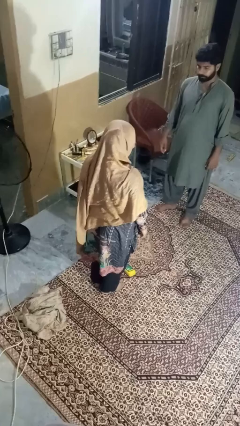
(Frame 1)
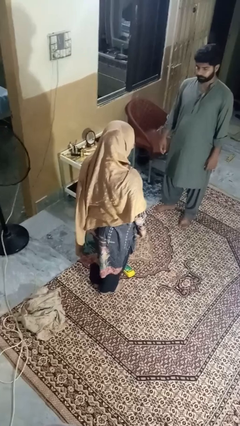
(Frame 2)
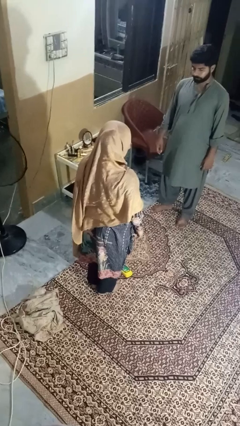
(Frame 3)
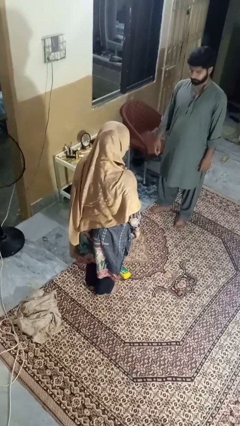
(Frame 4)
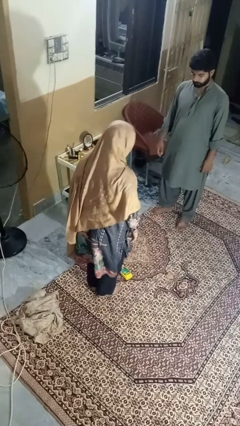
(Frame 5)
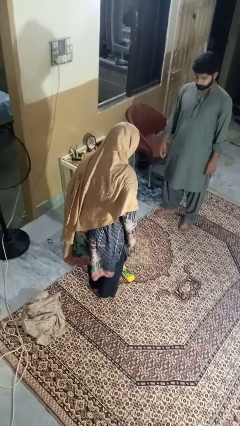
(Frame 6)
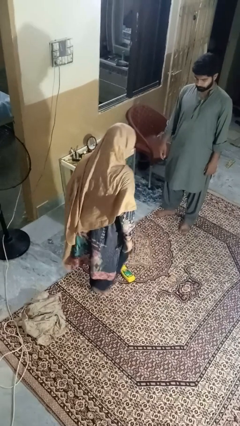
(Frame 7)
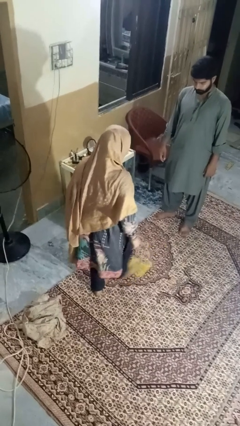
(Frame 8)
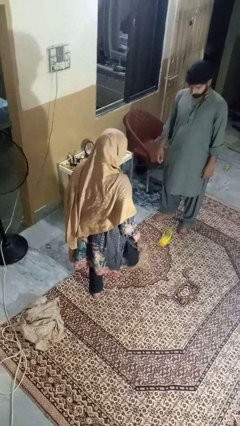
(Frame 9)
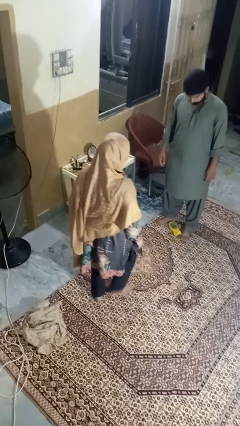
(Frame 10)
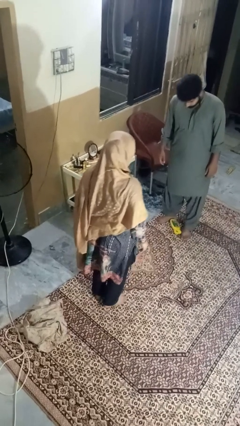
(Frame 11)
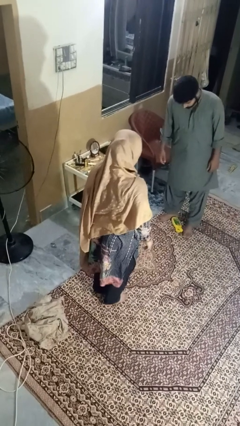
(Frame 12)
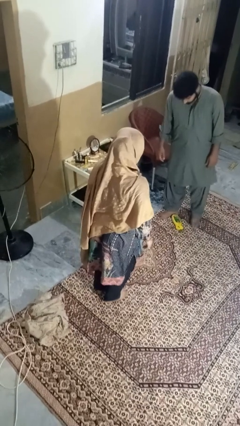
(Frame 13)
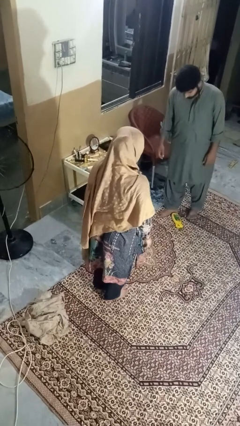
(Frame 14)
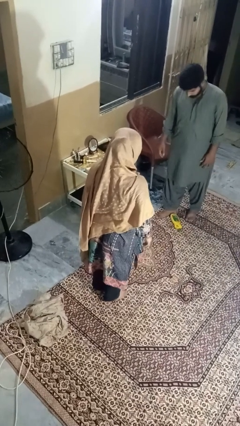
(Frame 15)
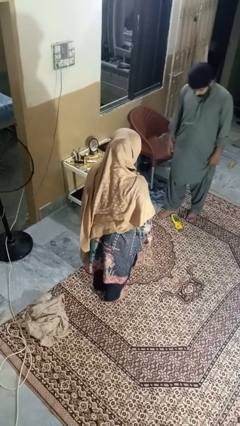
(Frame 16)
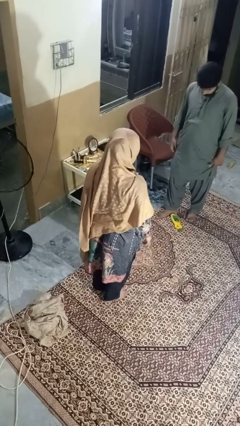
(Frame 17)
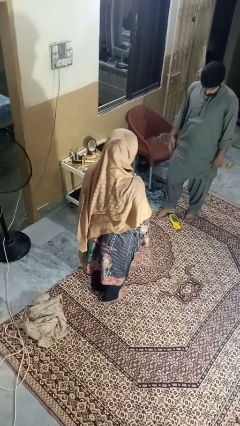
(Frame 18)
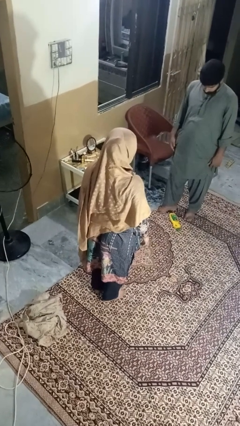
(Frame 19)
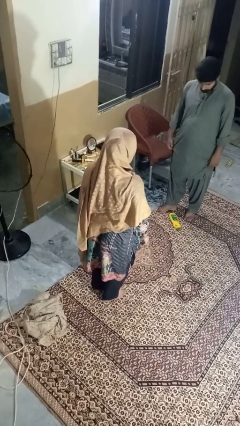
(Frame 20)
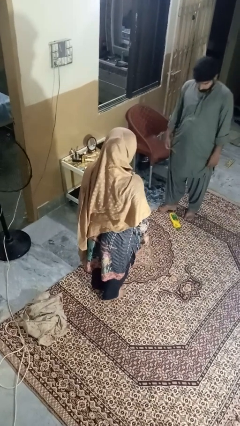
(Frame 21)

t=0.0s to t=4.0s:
person kicks object to person

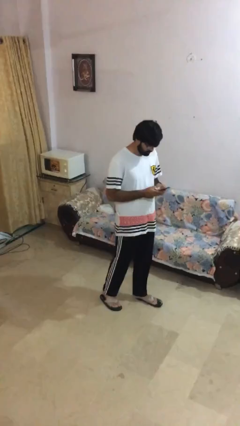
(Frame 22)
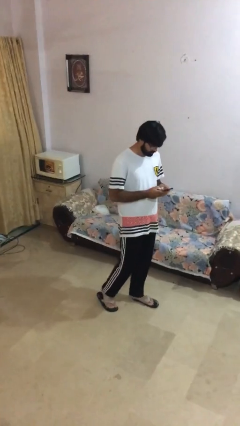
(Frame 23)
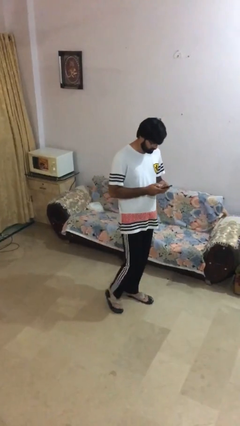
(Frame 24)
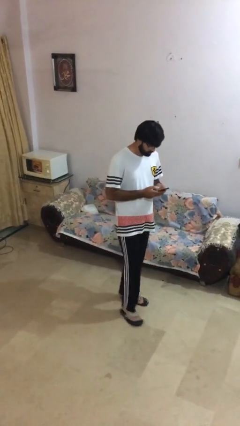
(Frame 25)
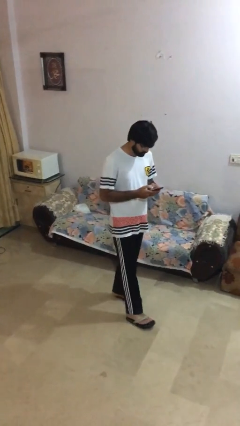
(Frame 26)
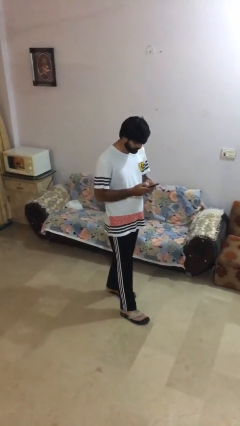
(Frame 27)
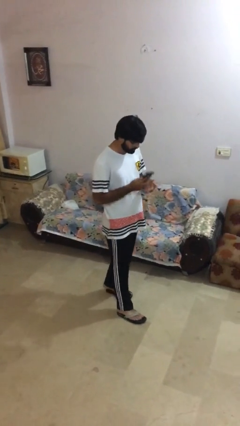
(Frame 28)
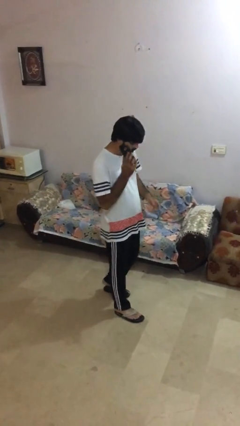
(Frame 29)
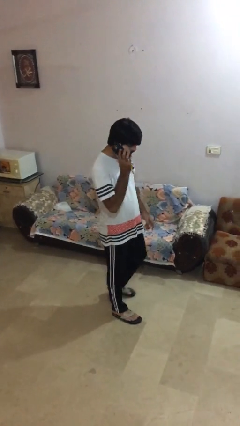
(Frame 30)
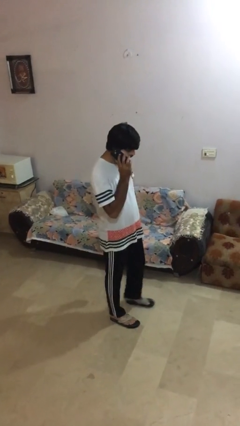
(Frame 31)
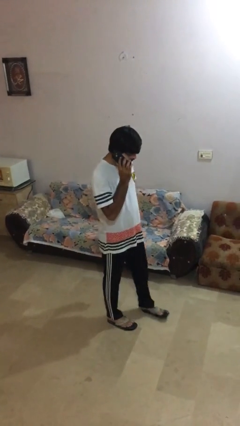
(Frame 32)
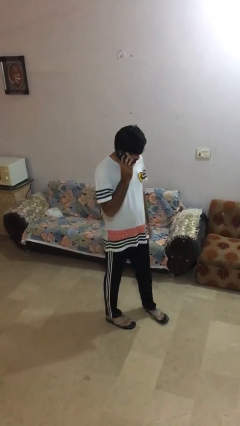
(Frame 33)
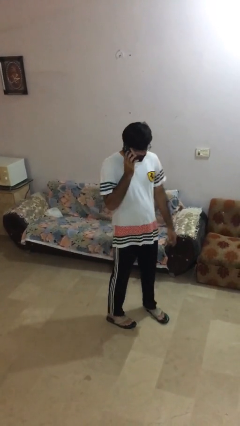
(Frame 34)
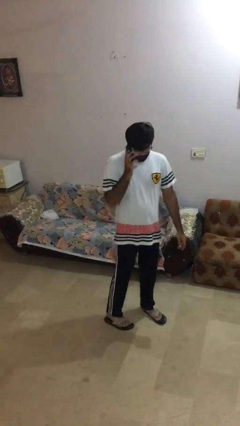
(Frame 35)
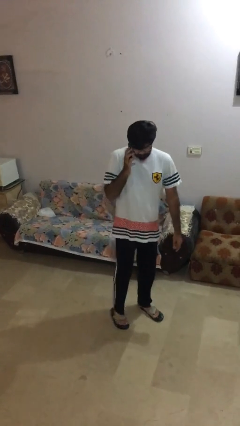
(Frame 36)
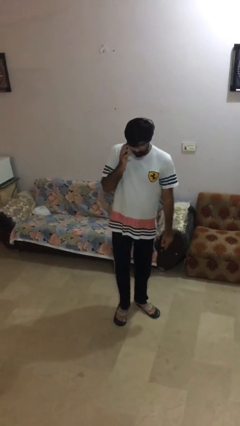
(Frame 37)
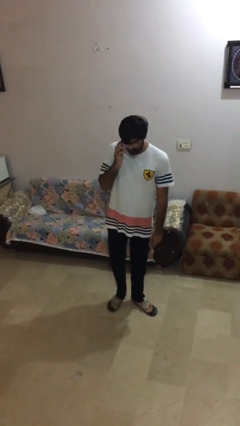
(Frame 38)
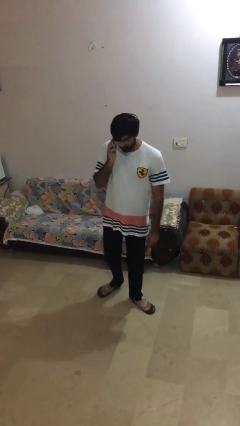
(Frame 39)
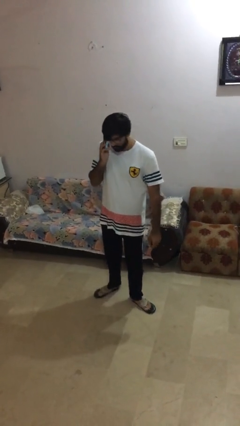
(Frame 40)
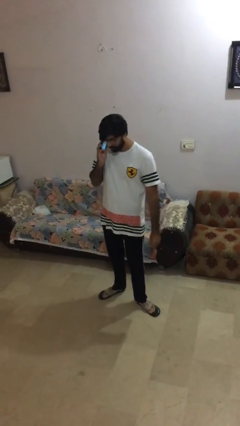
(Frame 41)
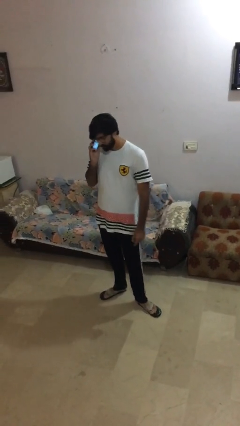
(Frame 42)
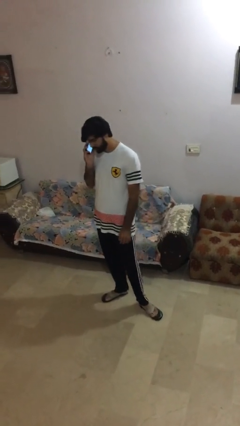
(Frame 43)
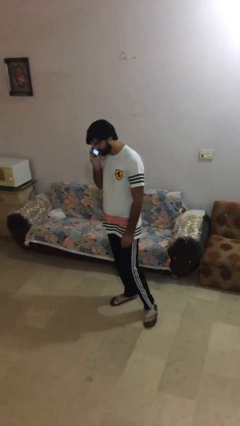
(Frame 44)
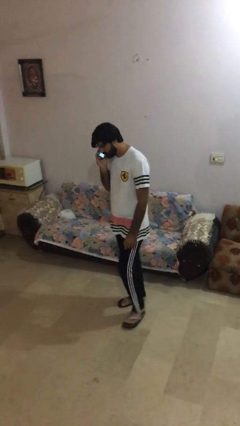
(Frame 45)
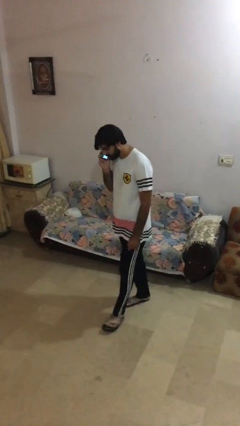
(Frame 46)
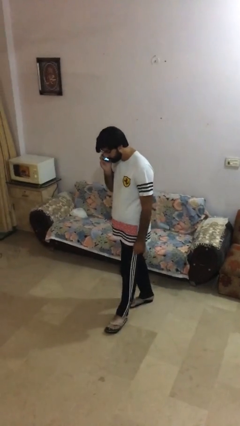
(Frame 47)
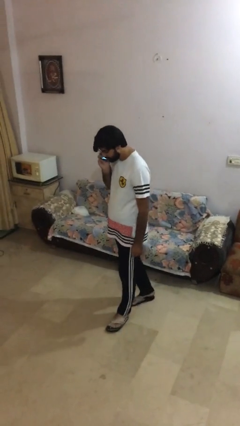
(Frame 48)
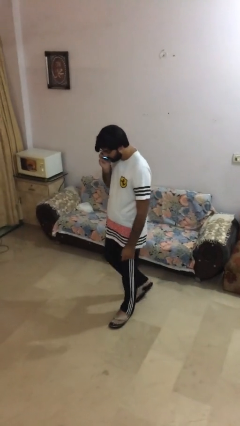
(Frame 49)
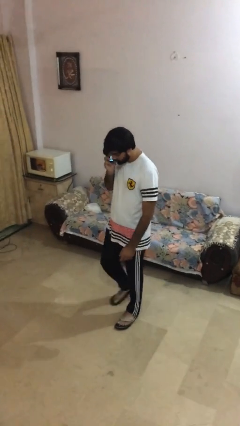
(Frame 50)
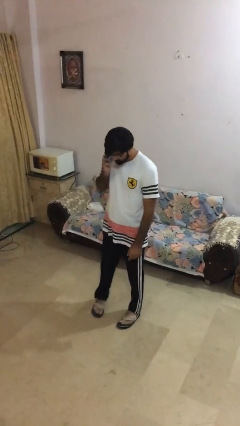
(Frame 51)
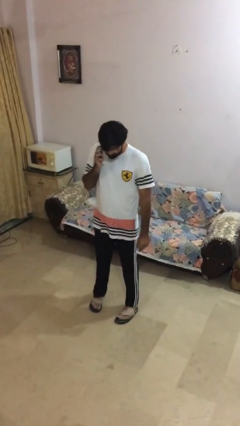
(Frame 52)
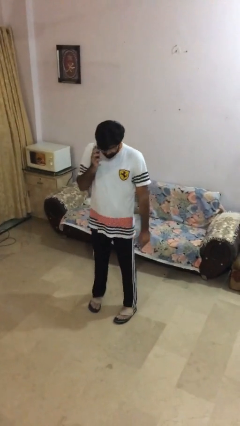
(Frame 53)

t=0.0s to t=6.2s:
person talks on phone

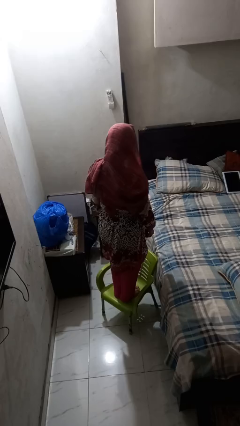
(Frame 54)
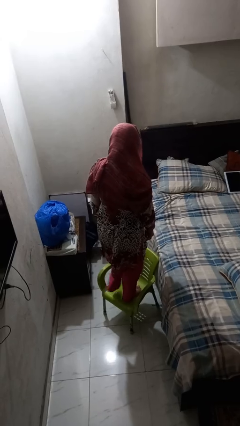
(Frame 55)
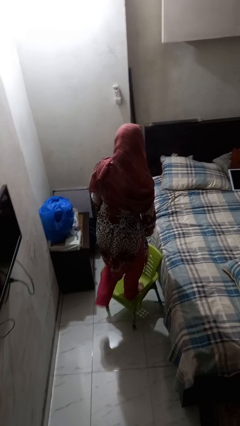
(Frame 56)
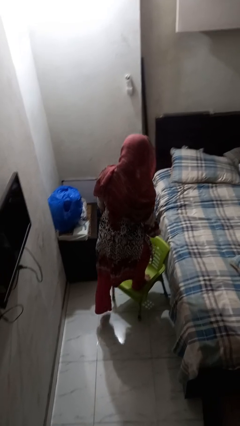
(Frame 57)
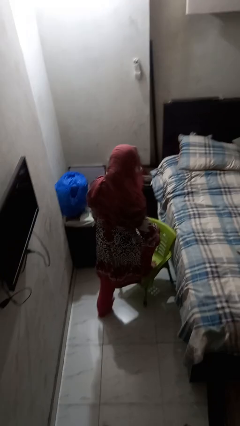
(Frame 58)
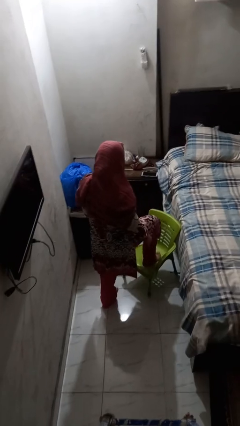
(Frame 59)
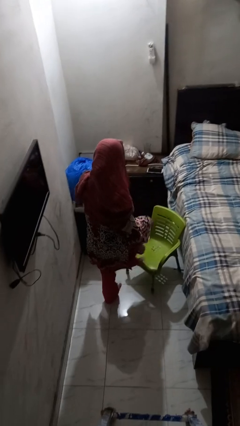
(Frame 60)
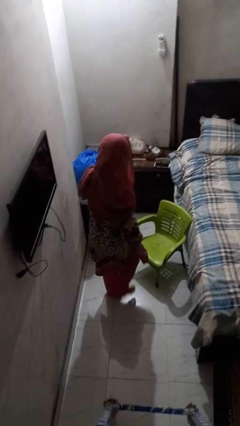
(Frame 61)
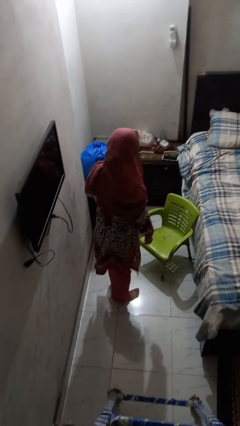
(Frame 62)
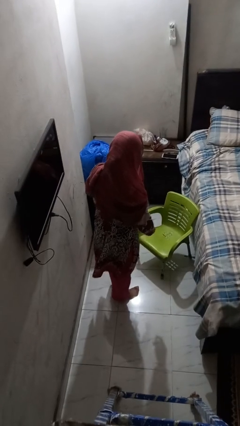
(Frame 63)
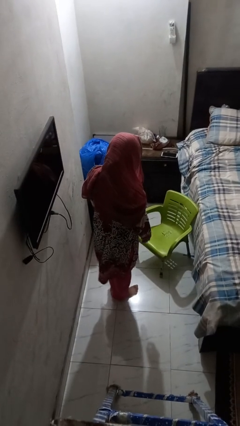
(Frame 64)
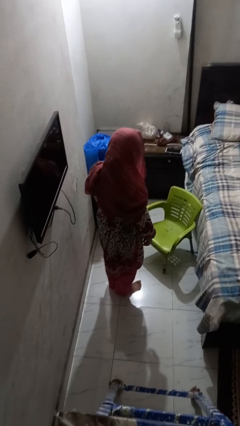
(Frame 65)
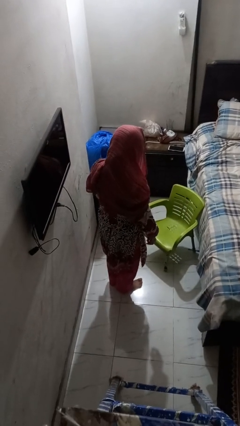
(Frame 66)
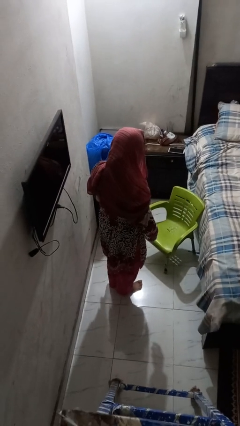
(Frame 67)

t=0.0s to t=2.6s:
person climbs off chair

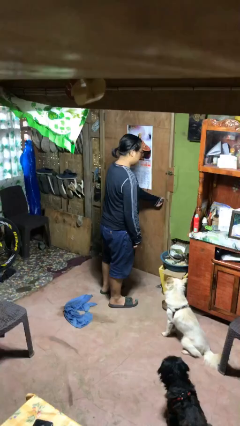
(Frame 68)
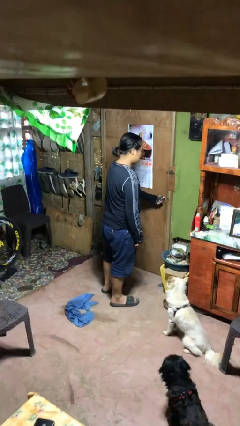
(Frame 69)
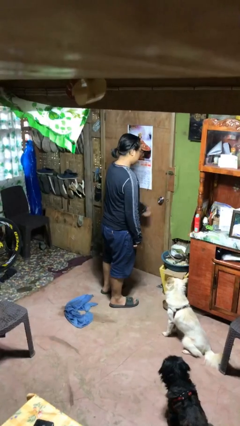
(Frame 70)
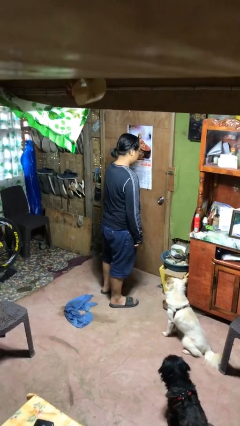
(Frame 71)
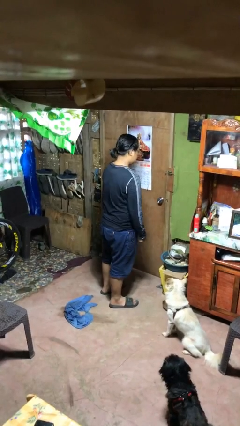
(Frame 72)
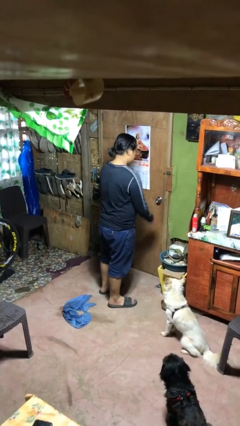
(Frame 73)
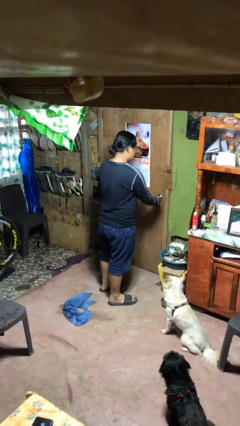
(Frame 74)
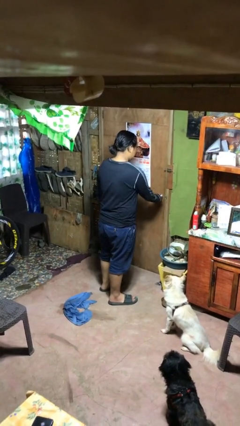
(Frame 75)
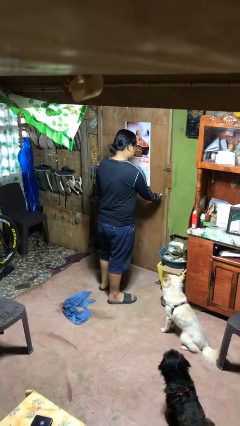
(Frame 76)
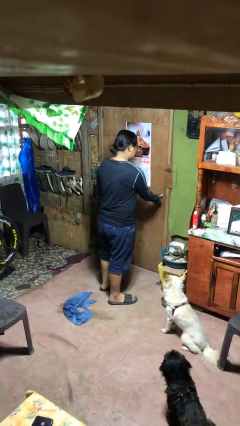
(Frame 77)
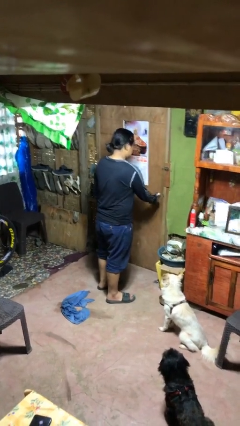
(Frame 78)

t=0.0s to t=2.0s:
person locks door with keys

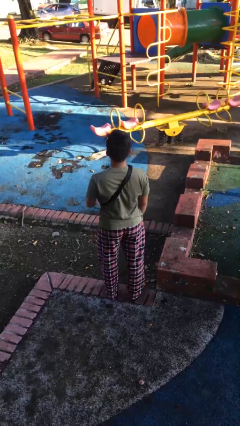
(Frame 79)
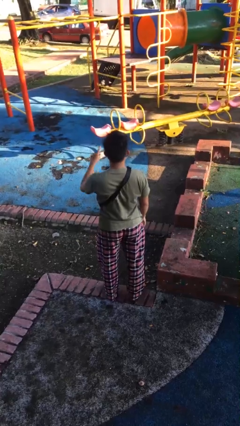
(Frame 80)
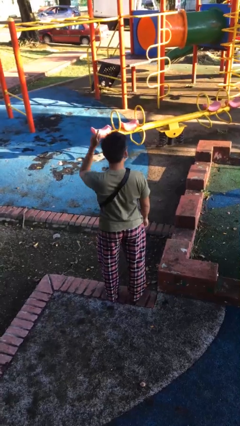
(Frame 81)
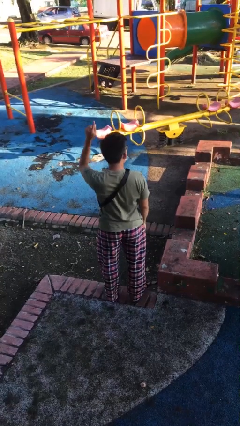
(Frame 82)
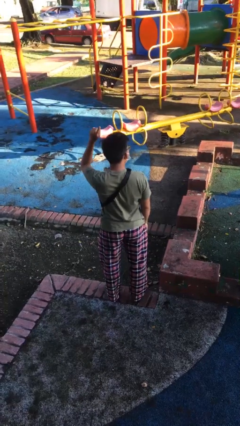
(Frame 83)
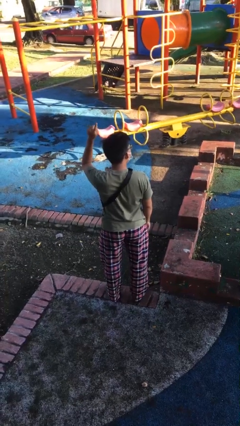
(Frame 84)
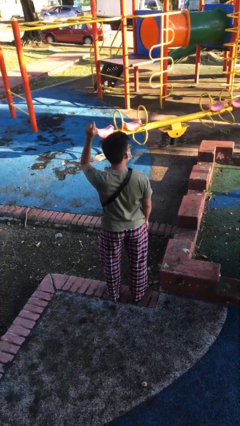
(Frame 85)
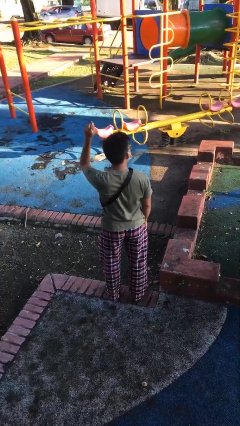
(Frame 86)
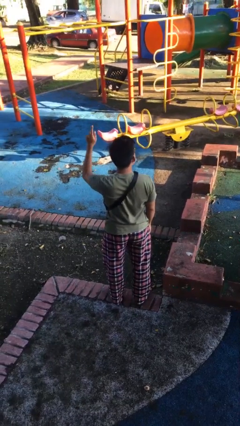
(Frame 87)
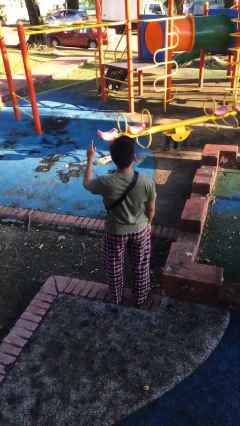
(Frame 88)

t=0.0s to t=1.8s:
person gestures number one

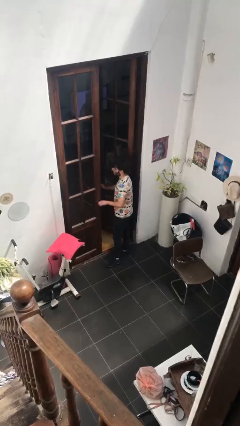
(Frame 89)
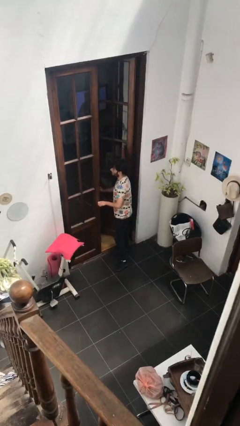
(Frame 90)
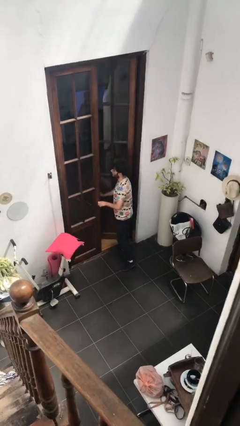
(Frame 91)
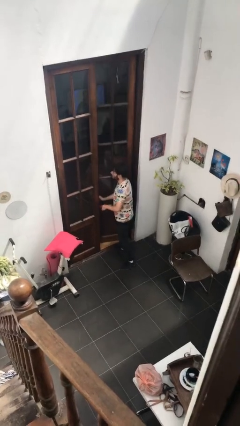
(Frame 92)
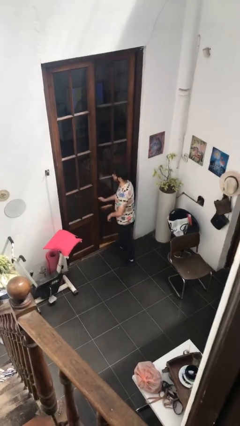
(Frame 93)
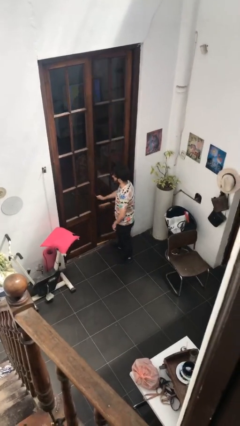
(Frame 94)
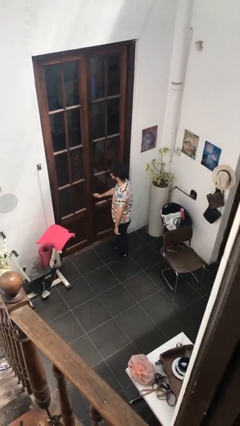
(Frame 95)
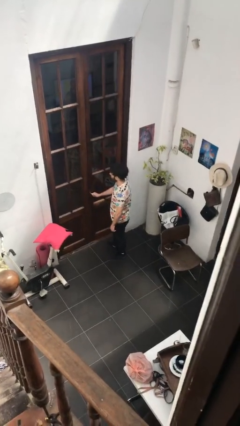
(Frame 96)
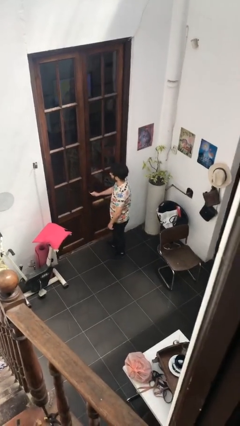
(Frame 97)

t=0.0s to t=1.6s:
person closes facility door
